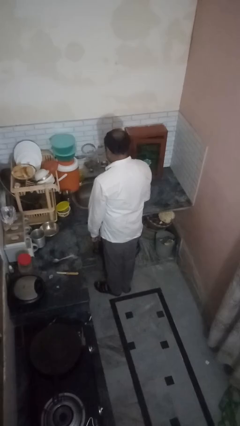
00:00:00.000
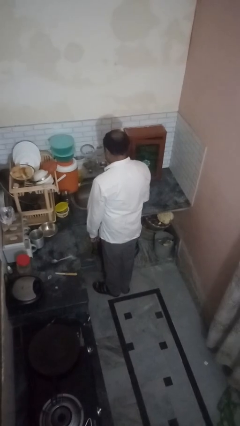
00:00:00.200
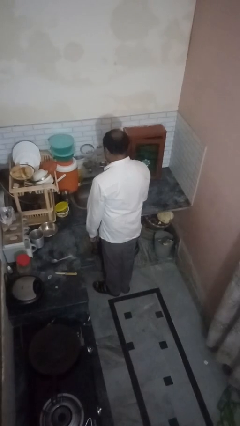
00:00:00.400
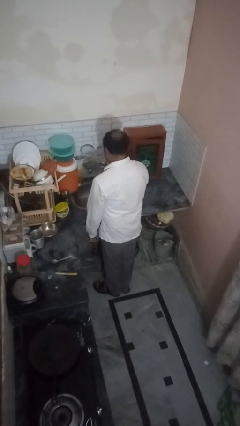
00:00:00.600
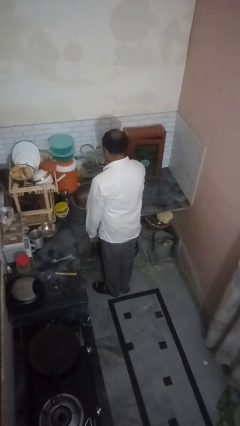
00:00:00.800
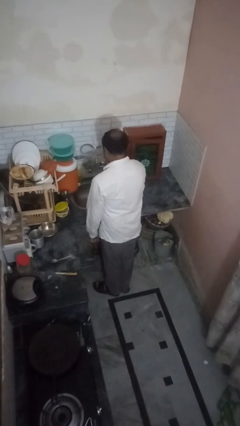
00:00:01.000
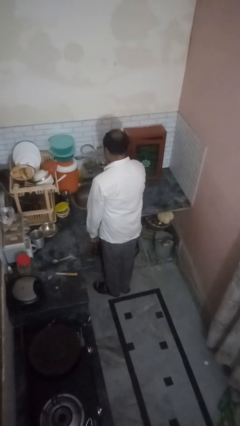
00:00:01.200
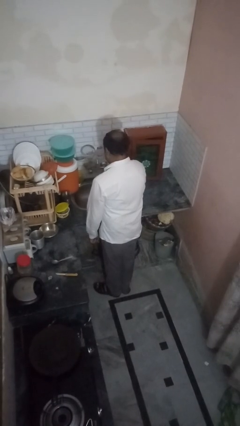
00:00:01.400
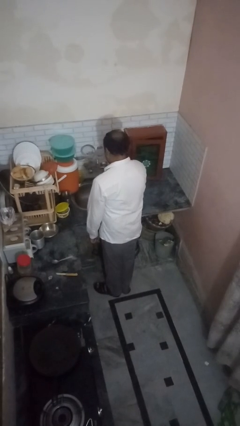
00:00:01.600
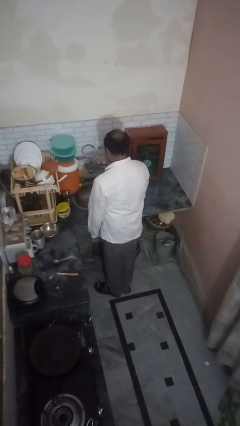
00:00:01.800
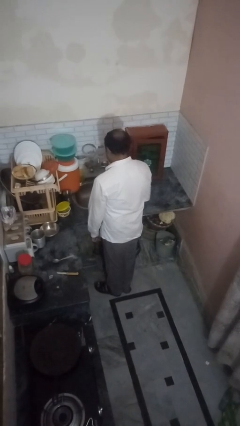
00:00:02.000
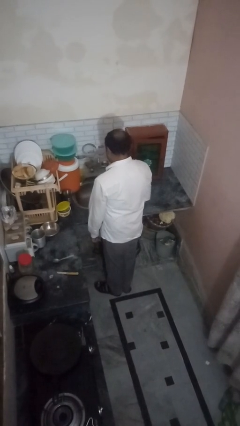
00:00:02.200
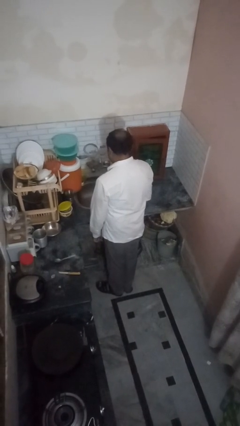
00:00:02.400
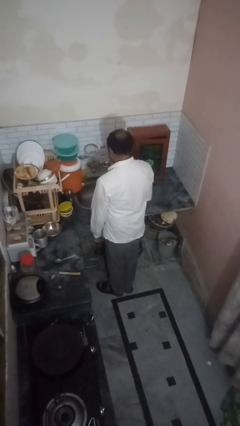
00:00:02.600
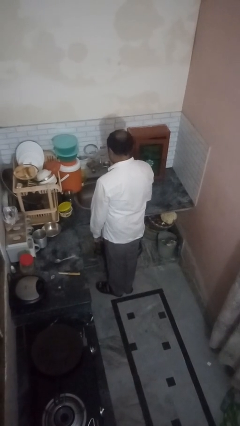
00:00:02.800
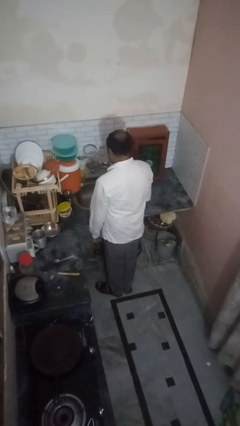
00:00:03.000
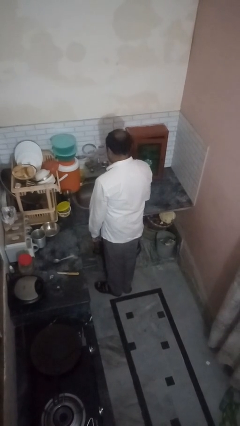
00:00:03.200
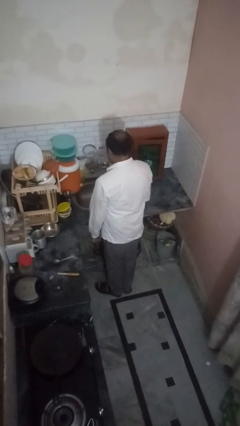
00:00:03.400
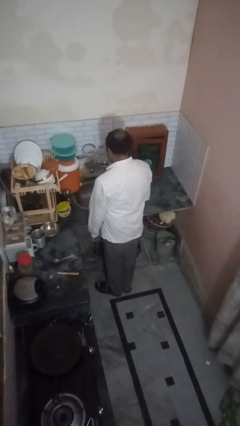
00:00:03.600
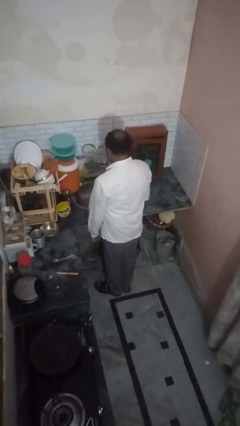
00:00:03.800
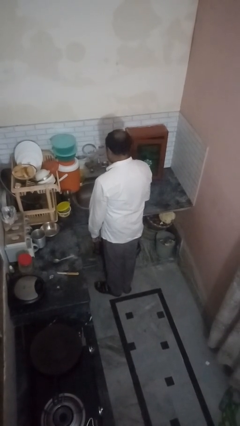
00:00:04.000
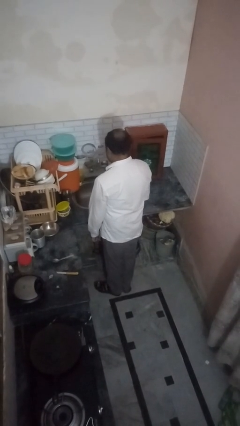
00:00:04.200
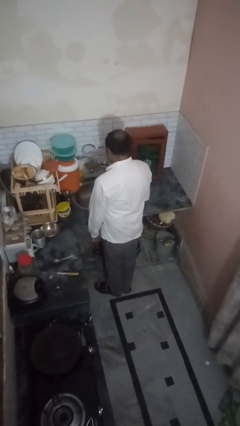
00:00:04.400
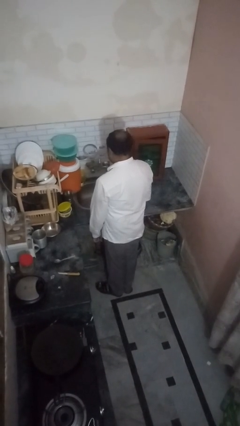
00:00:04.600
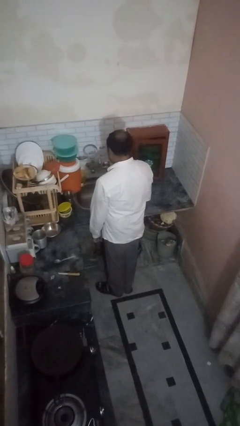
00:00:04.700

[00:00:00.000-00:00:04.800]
person turns off faucet

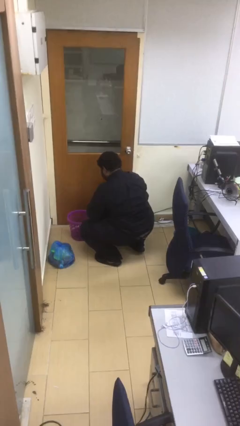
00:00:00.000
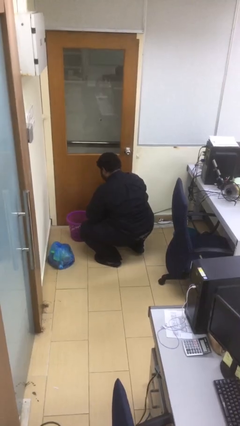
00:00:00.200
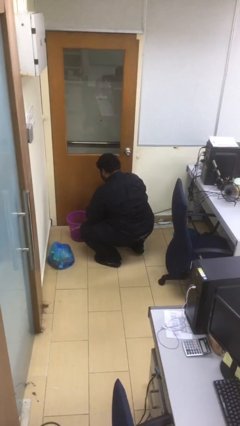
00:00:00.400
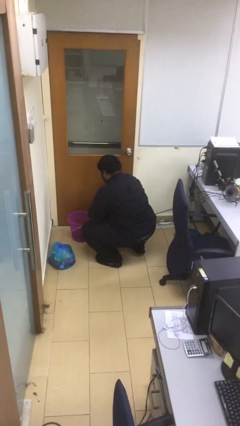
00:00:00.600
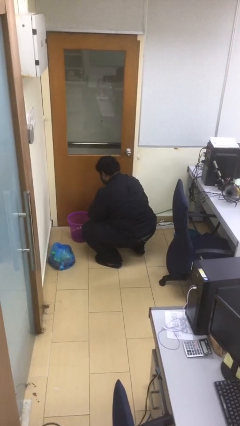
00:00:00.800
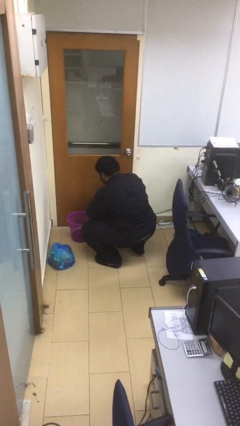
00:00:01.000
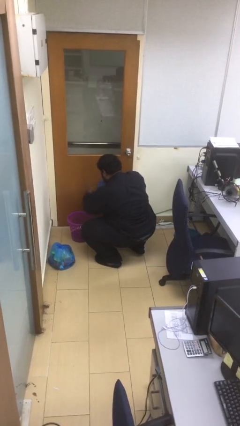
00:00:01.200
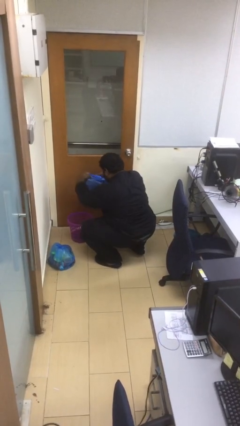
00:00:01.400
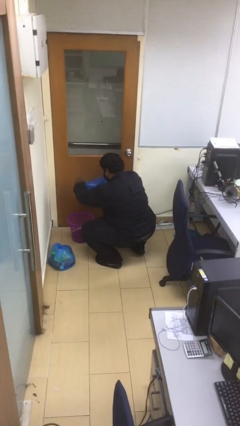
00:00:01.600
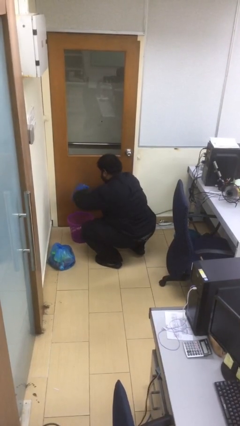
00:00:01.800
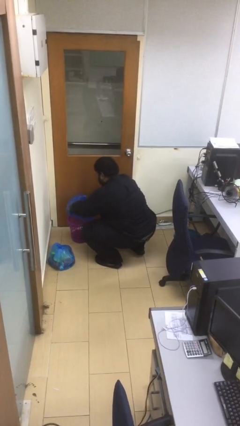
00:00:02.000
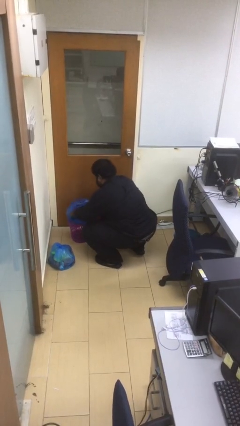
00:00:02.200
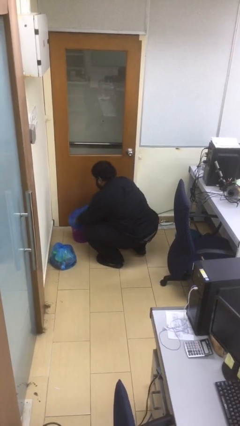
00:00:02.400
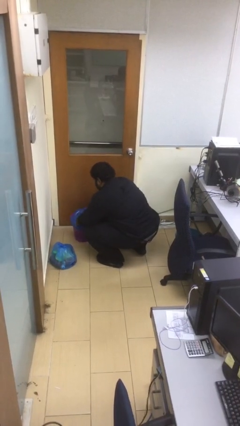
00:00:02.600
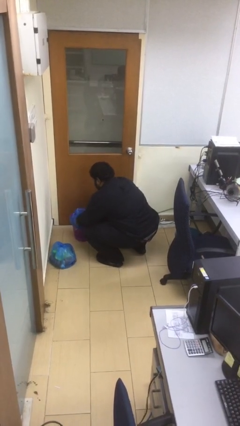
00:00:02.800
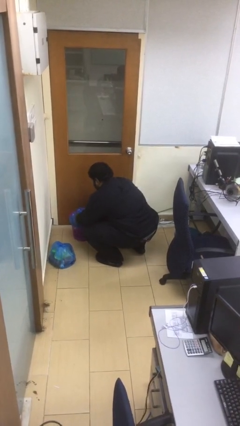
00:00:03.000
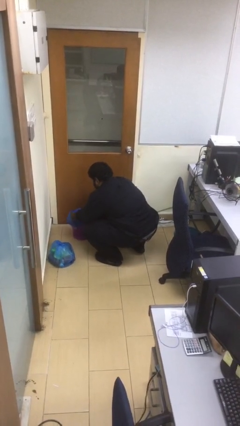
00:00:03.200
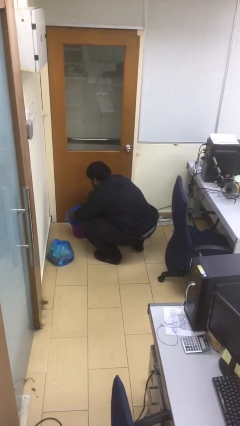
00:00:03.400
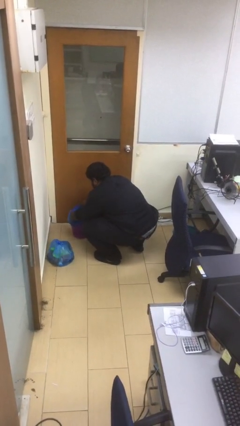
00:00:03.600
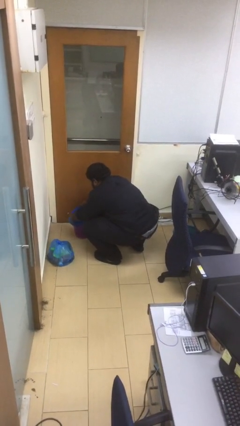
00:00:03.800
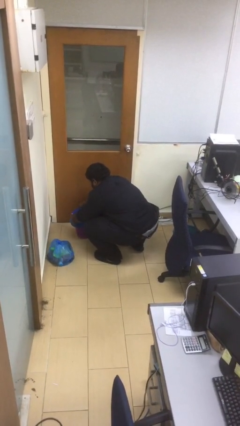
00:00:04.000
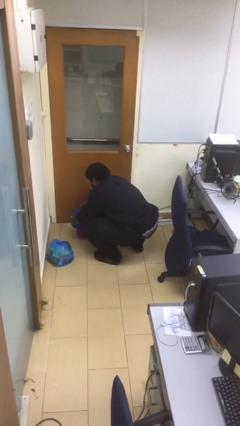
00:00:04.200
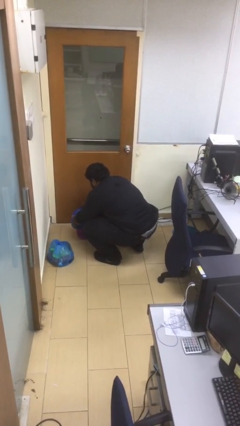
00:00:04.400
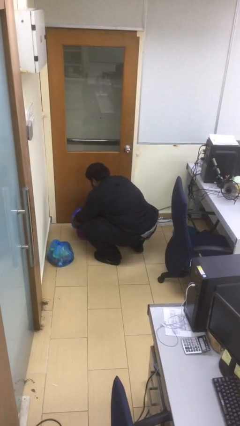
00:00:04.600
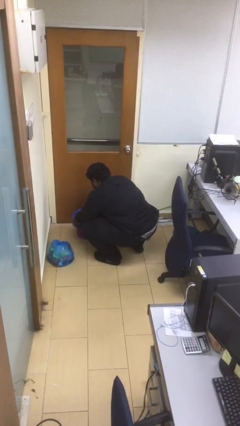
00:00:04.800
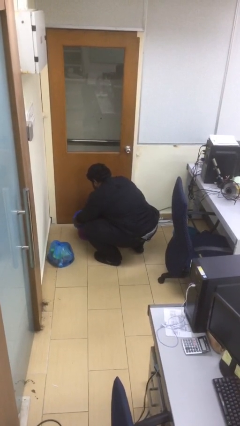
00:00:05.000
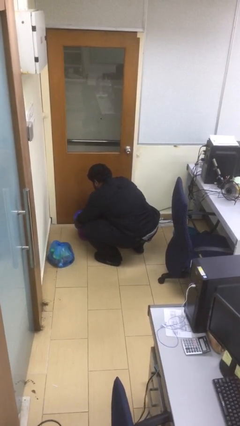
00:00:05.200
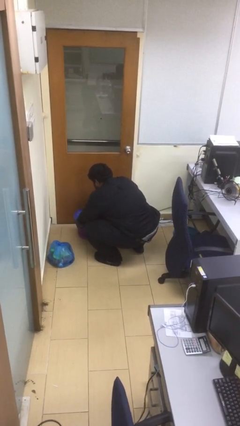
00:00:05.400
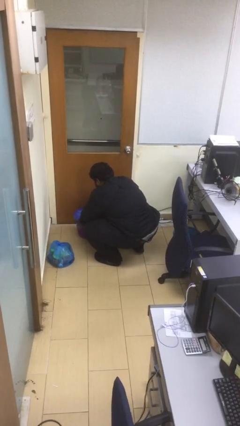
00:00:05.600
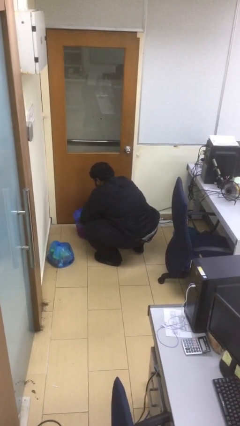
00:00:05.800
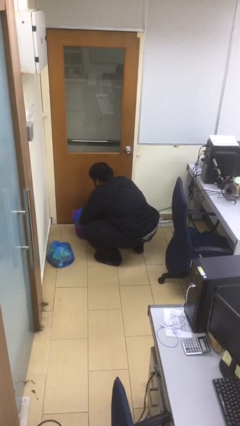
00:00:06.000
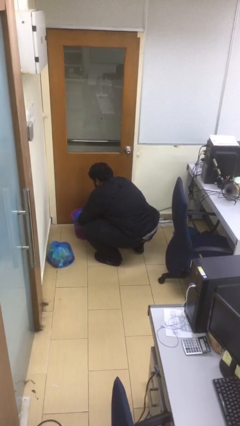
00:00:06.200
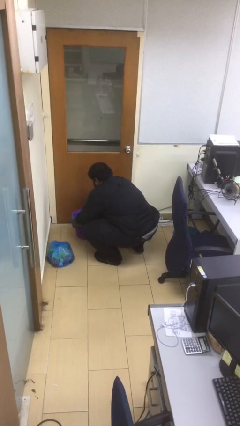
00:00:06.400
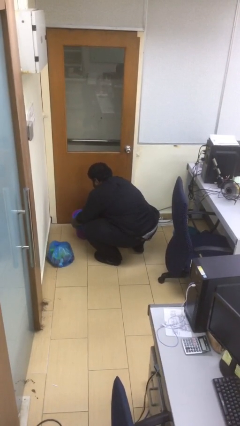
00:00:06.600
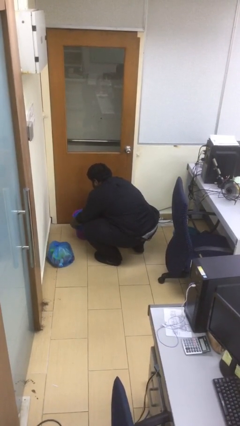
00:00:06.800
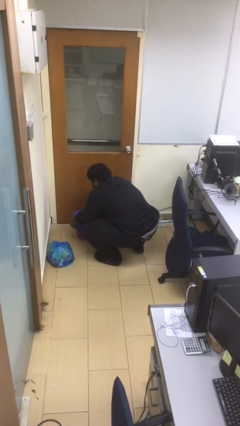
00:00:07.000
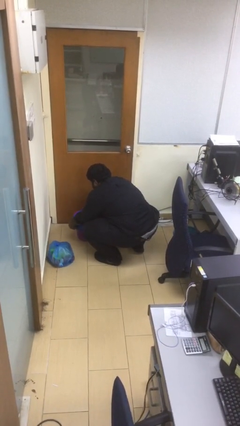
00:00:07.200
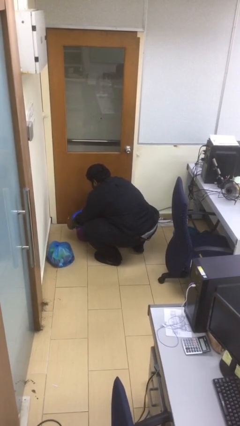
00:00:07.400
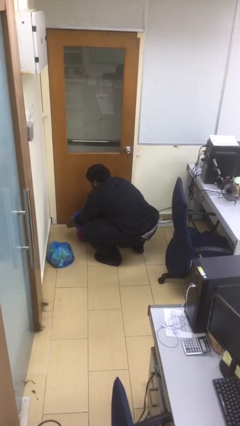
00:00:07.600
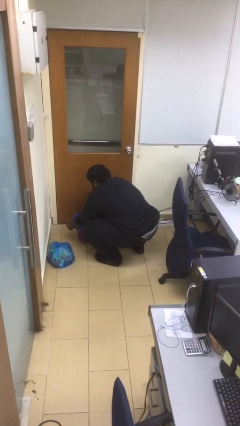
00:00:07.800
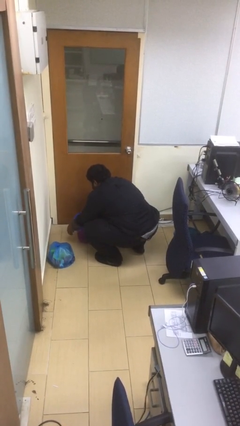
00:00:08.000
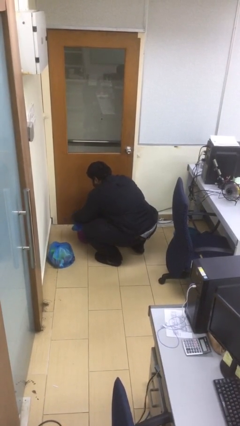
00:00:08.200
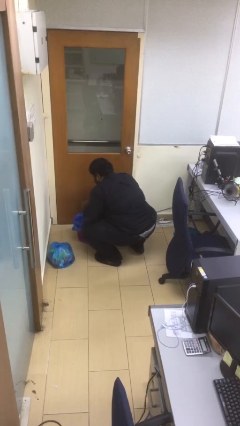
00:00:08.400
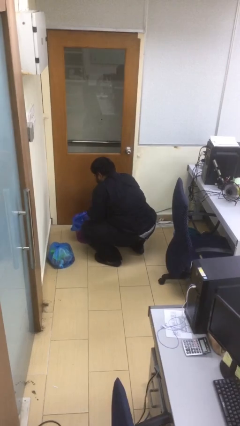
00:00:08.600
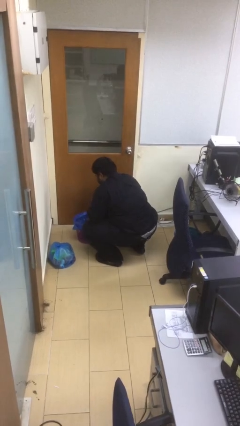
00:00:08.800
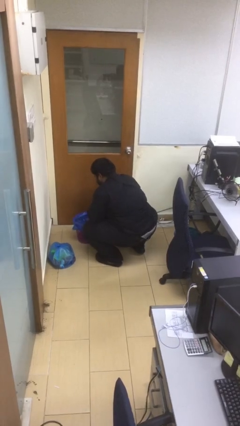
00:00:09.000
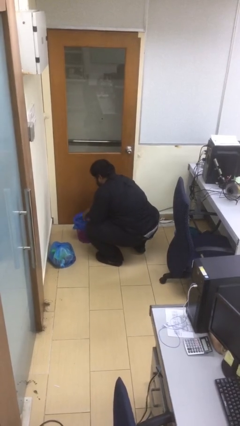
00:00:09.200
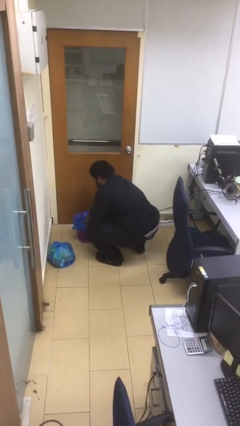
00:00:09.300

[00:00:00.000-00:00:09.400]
person inserts trashbag into trashcan

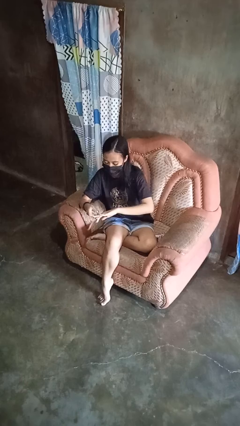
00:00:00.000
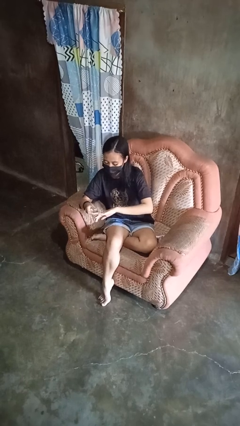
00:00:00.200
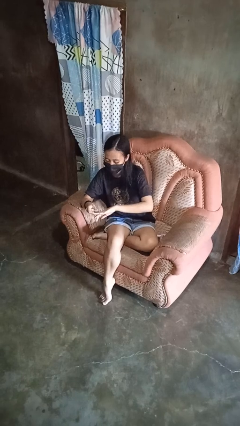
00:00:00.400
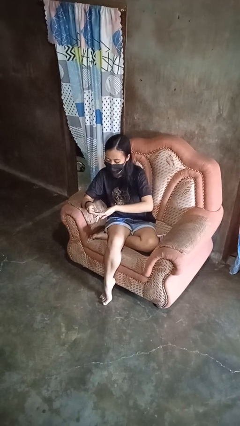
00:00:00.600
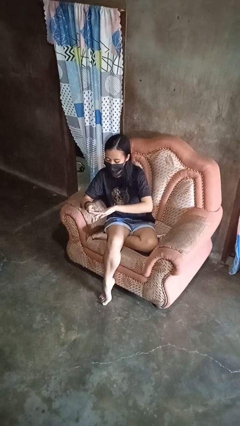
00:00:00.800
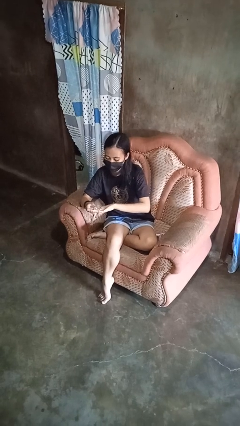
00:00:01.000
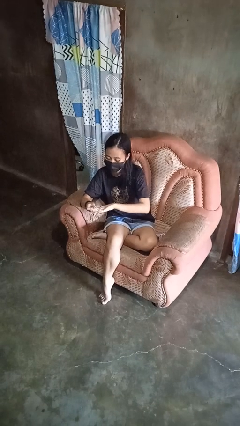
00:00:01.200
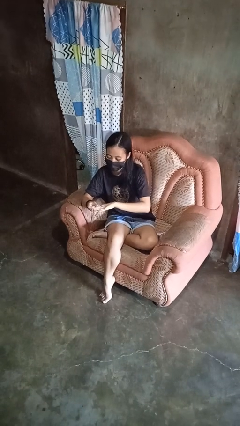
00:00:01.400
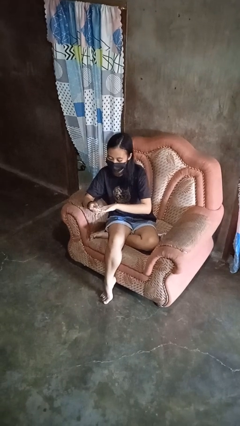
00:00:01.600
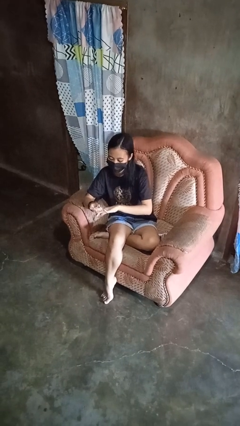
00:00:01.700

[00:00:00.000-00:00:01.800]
person clips fingernails

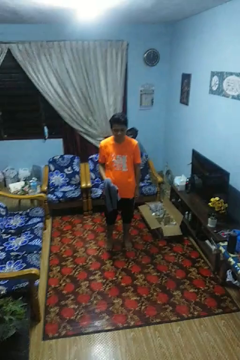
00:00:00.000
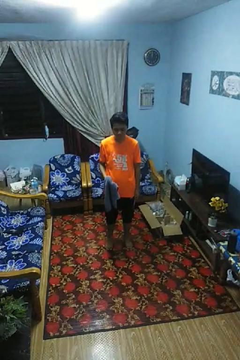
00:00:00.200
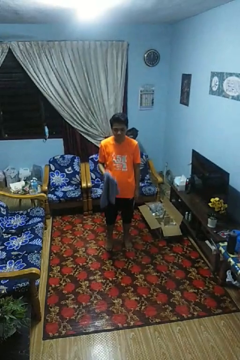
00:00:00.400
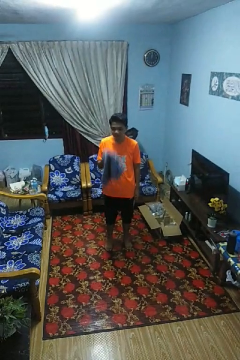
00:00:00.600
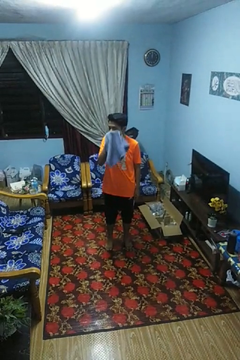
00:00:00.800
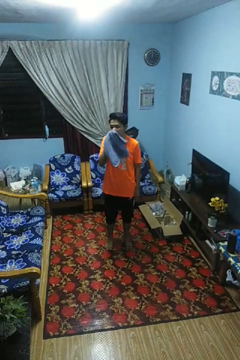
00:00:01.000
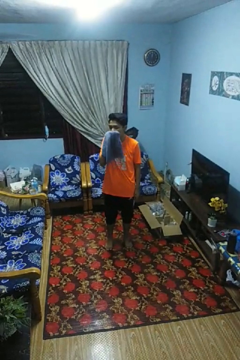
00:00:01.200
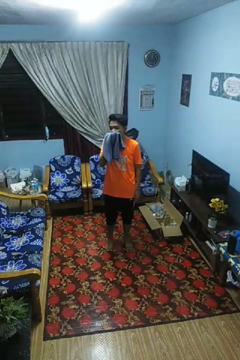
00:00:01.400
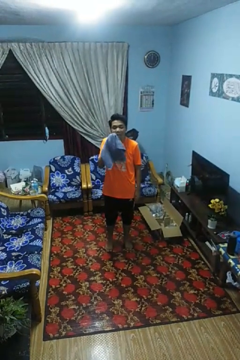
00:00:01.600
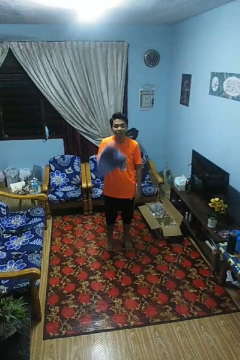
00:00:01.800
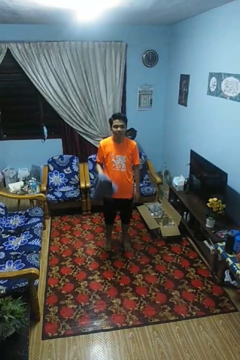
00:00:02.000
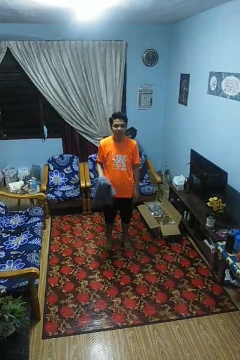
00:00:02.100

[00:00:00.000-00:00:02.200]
person wipes mouth with napkin

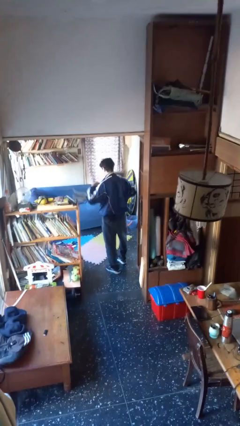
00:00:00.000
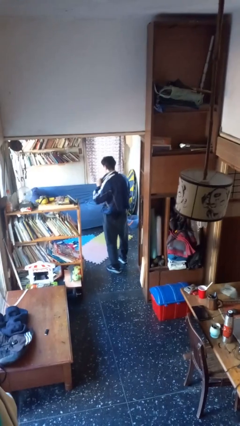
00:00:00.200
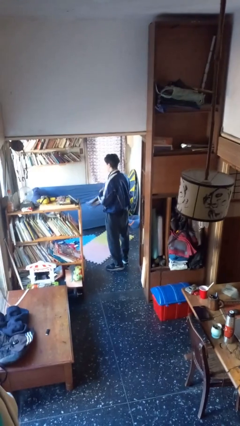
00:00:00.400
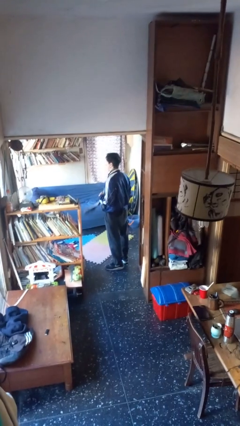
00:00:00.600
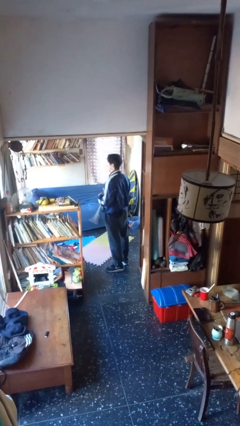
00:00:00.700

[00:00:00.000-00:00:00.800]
person puts on scarf
